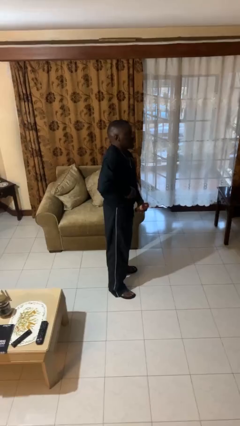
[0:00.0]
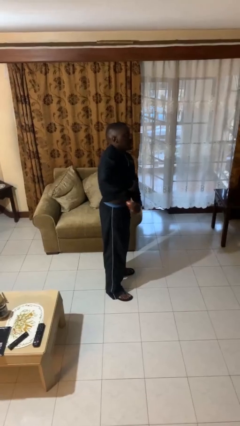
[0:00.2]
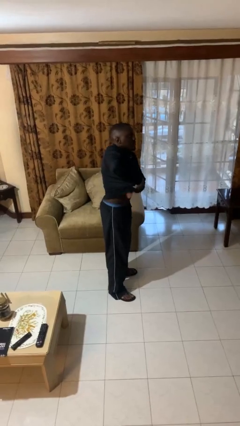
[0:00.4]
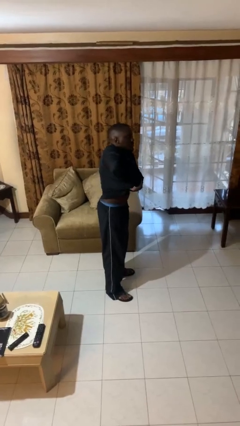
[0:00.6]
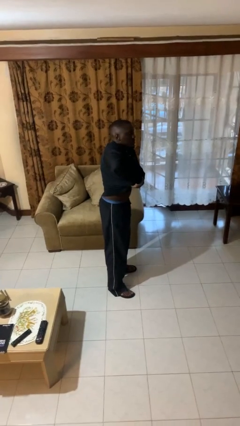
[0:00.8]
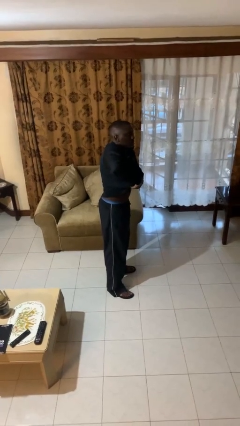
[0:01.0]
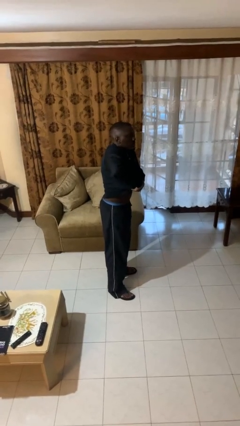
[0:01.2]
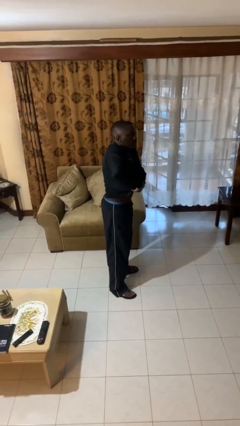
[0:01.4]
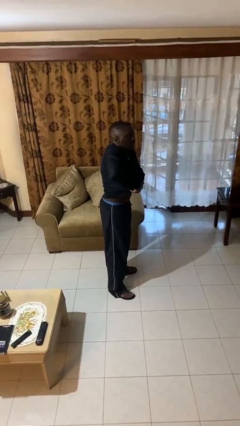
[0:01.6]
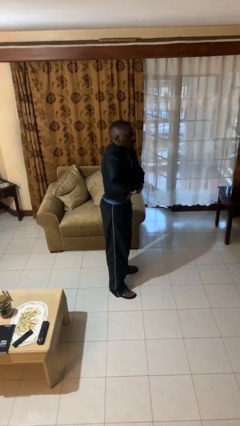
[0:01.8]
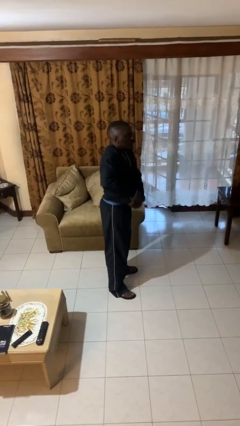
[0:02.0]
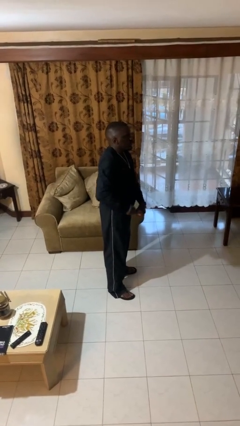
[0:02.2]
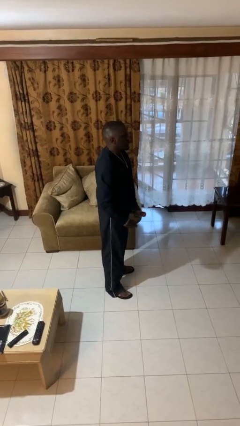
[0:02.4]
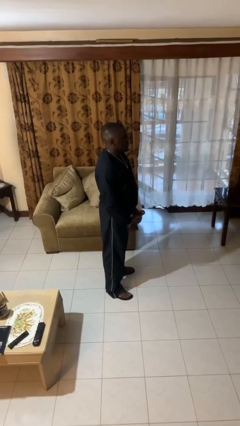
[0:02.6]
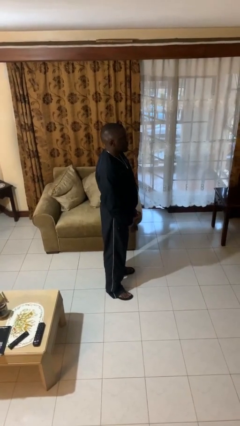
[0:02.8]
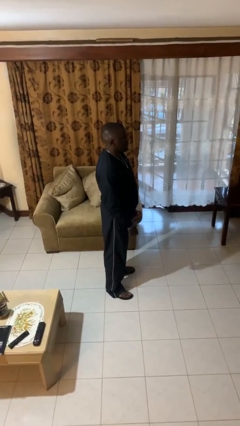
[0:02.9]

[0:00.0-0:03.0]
person applies deodorant

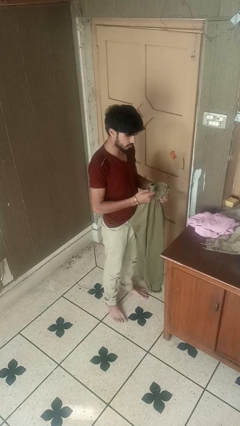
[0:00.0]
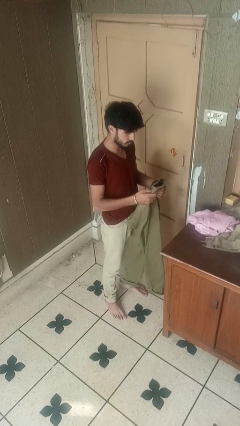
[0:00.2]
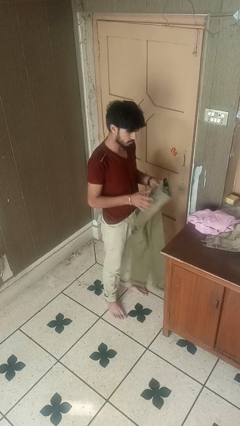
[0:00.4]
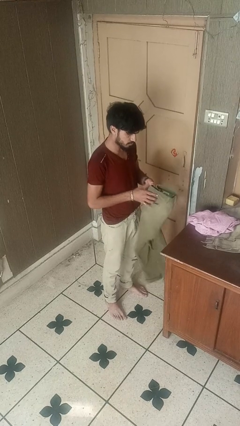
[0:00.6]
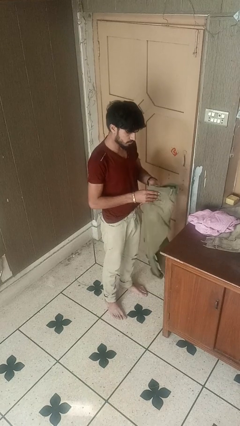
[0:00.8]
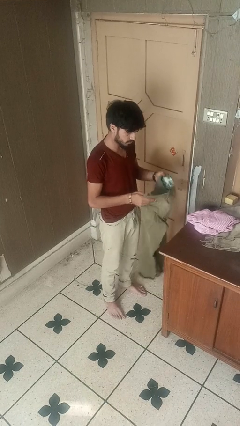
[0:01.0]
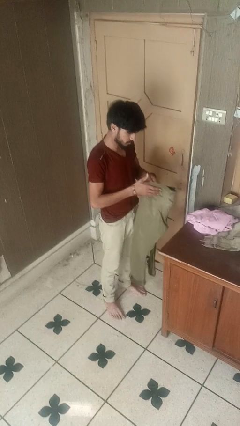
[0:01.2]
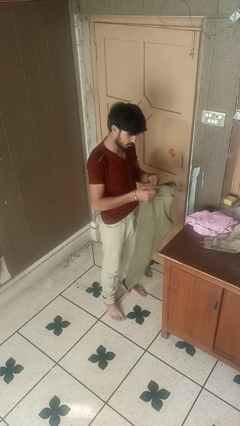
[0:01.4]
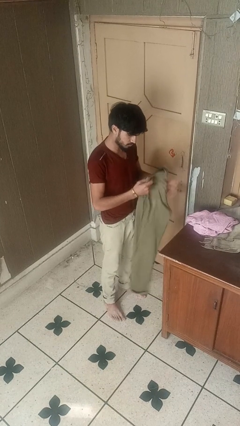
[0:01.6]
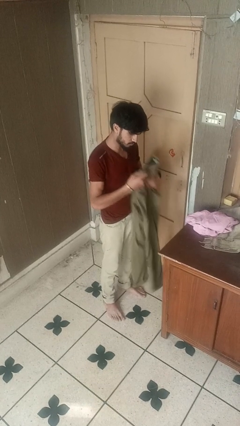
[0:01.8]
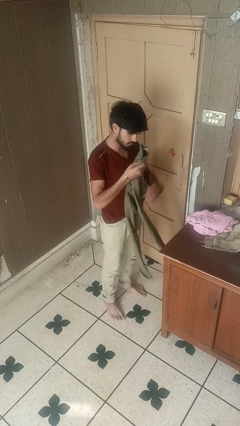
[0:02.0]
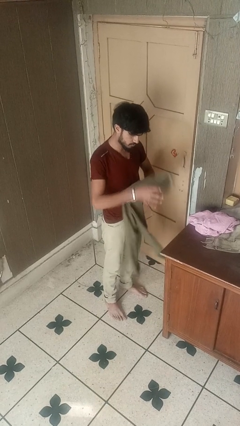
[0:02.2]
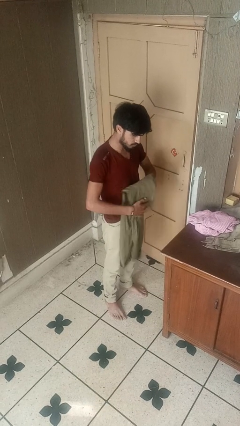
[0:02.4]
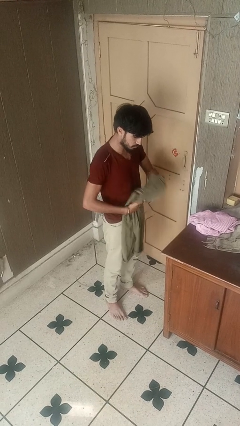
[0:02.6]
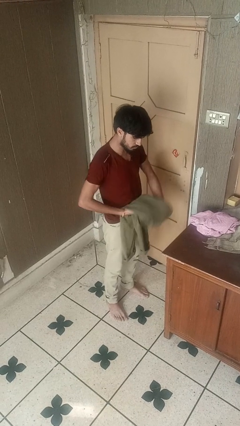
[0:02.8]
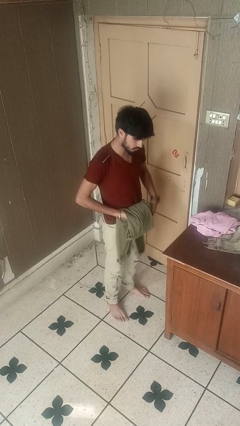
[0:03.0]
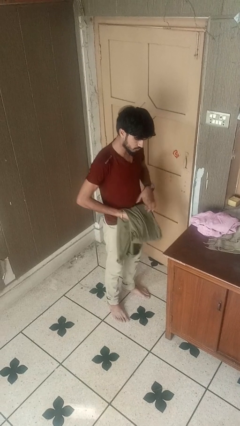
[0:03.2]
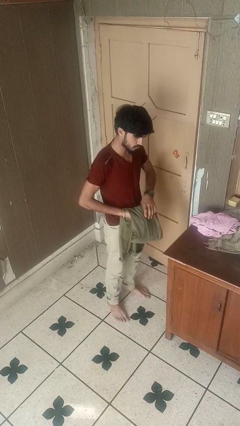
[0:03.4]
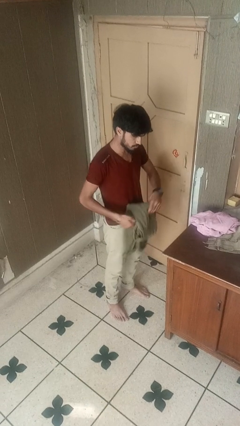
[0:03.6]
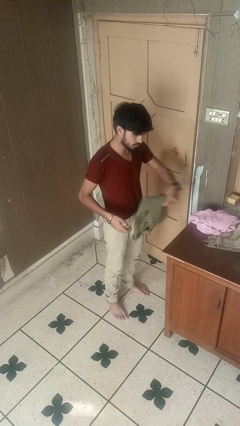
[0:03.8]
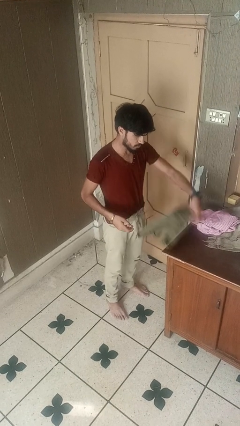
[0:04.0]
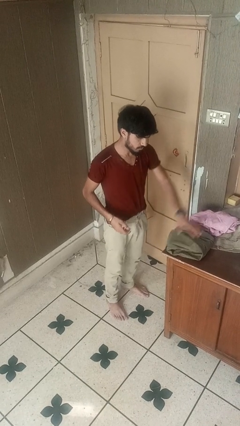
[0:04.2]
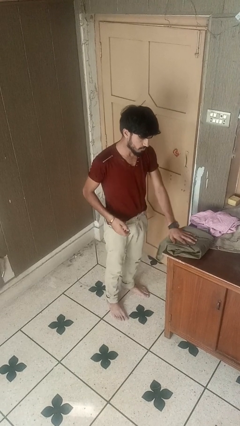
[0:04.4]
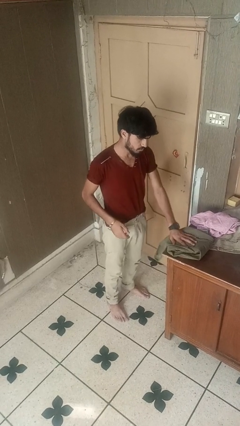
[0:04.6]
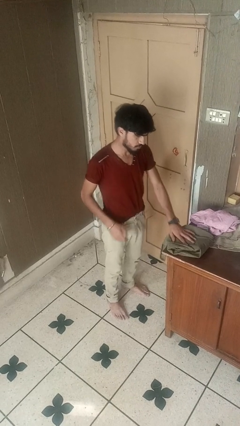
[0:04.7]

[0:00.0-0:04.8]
person folds pants

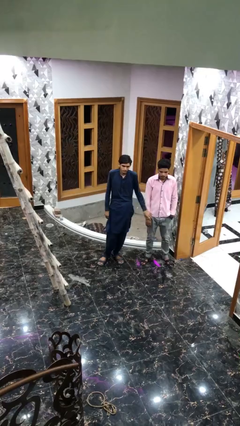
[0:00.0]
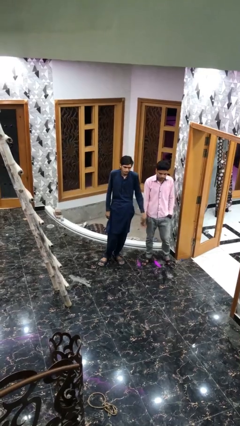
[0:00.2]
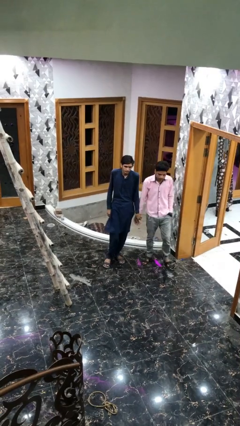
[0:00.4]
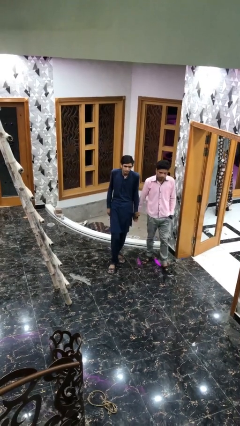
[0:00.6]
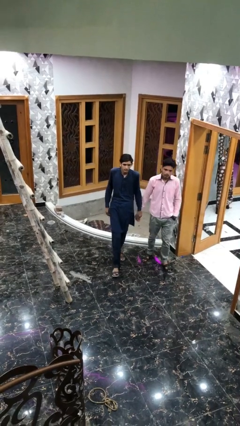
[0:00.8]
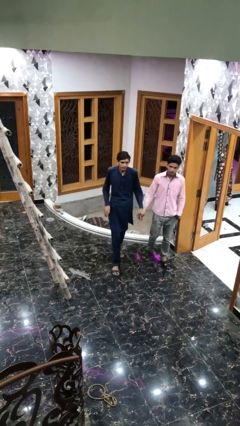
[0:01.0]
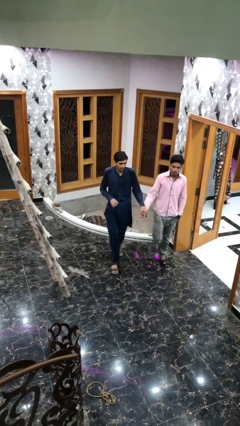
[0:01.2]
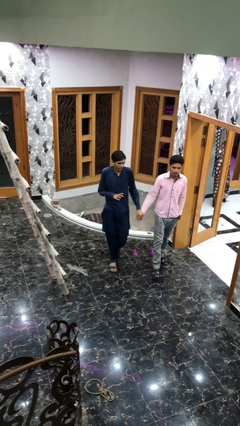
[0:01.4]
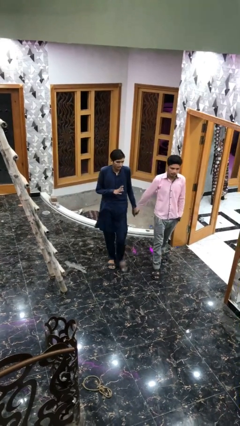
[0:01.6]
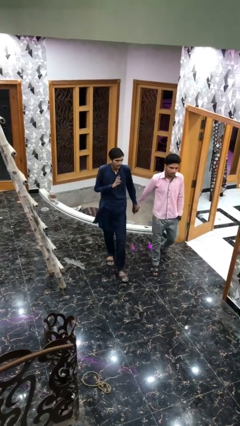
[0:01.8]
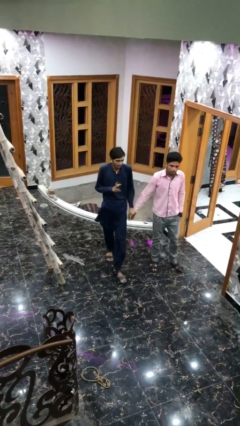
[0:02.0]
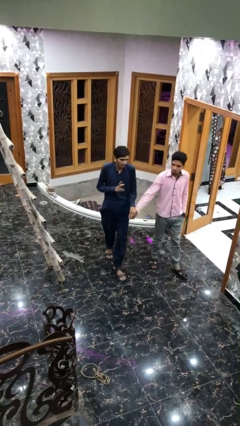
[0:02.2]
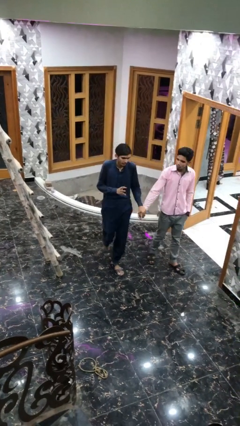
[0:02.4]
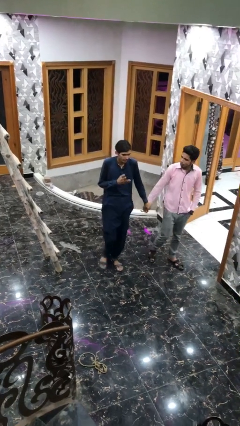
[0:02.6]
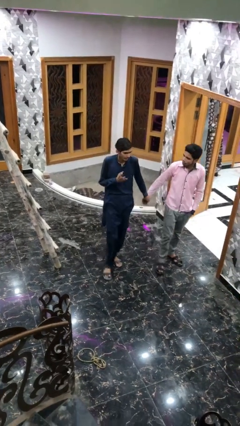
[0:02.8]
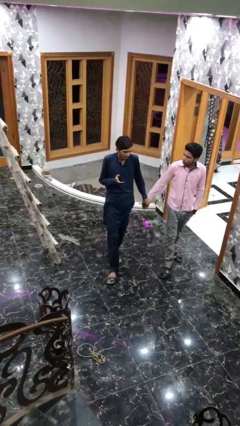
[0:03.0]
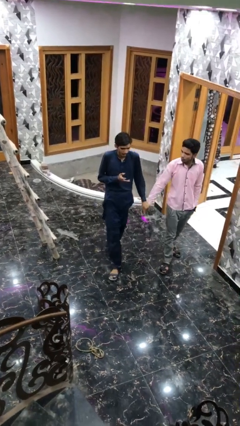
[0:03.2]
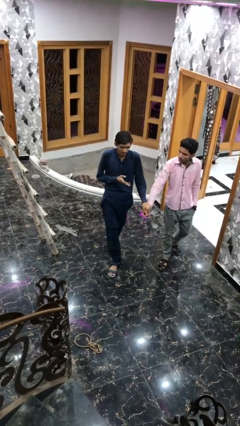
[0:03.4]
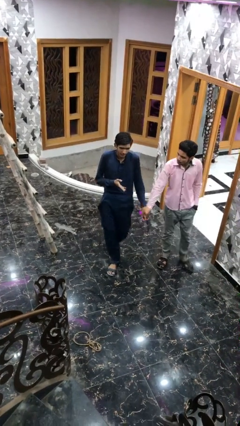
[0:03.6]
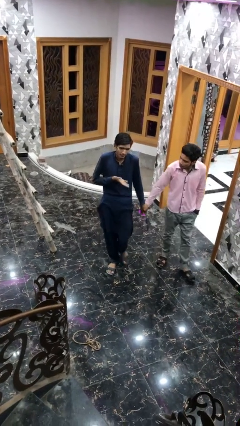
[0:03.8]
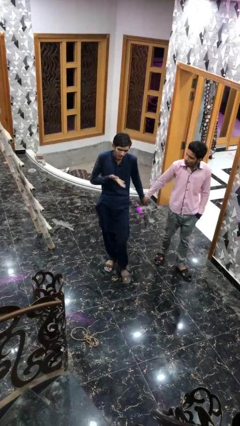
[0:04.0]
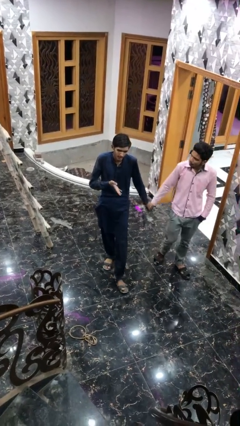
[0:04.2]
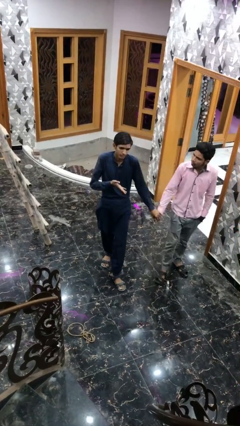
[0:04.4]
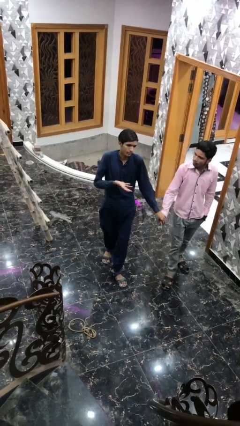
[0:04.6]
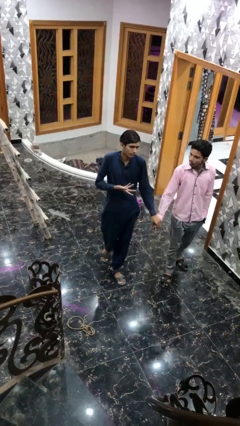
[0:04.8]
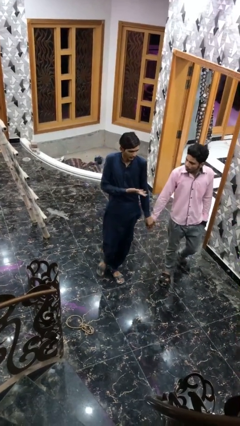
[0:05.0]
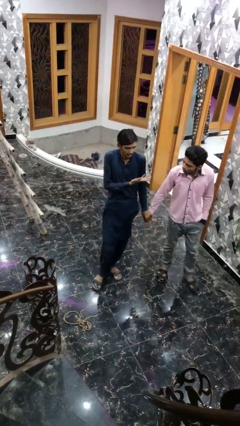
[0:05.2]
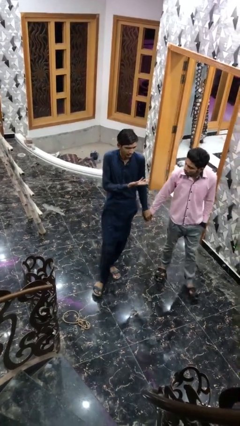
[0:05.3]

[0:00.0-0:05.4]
person holds hand

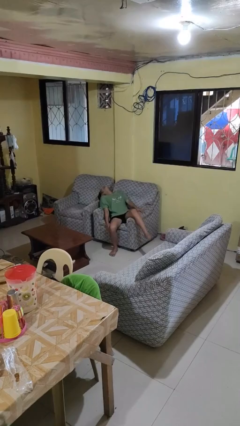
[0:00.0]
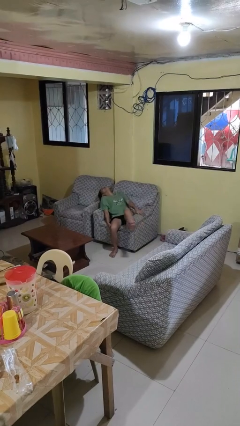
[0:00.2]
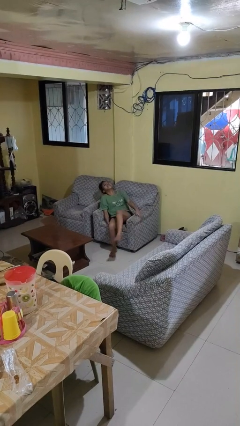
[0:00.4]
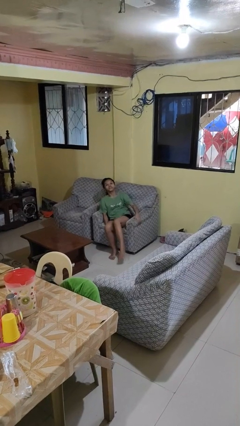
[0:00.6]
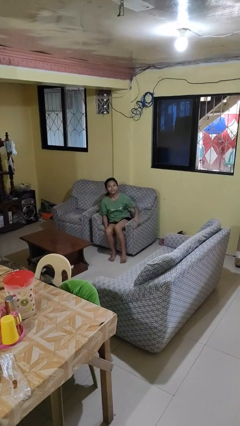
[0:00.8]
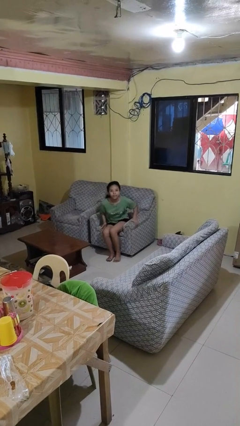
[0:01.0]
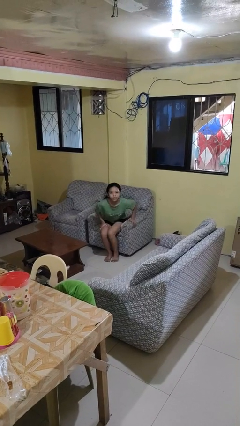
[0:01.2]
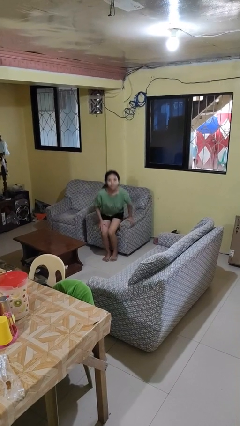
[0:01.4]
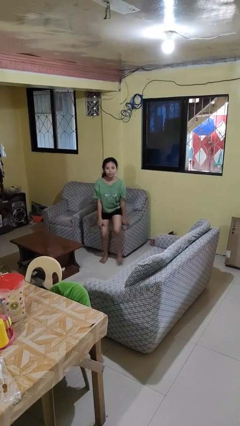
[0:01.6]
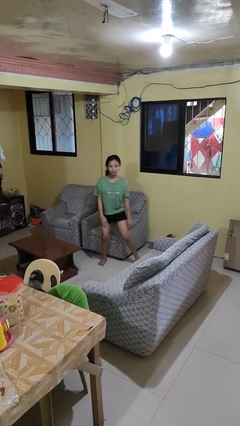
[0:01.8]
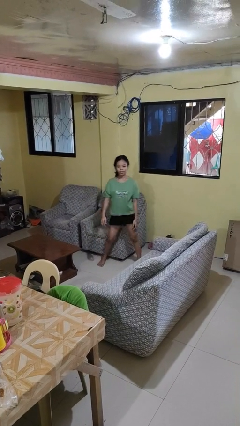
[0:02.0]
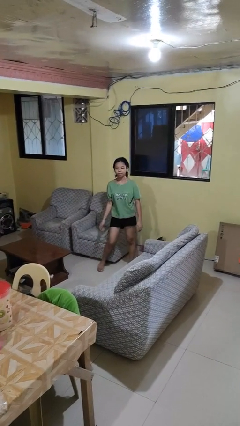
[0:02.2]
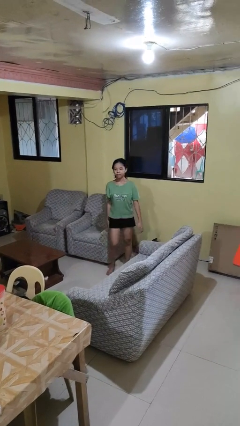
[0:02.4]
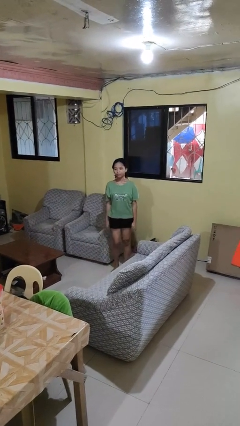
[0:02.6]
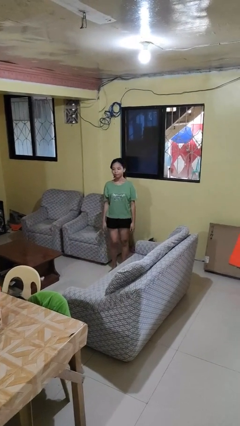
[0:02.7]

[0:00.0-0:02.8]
person stands up

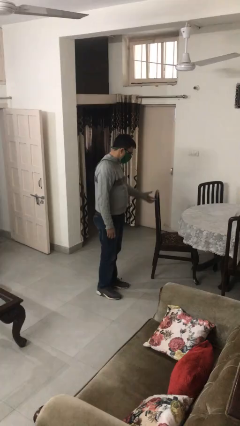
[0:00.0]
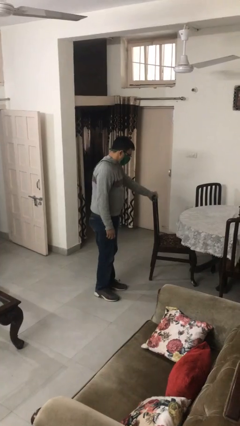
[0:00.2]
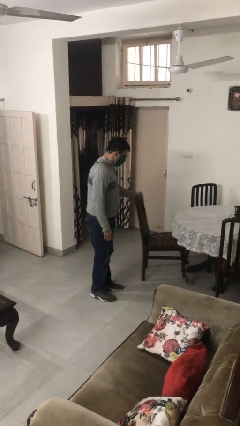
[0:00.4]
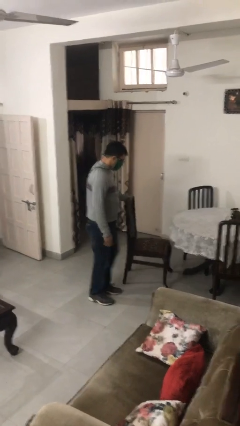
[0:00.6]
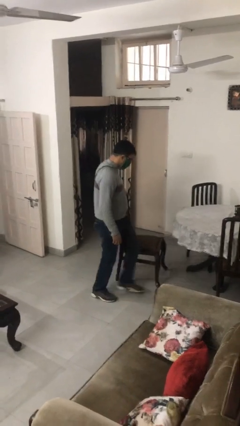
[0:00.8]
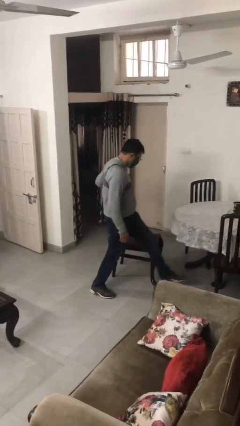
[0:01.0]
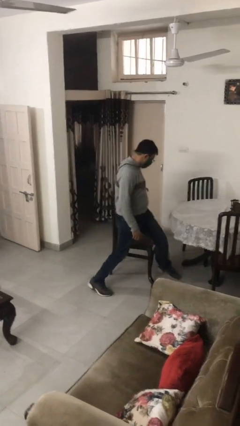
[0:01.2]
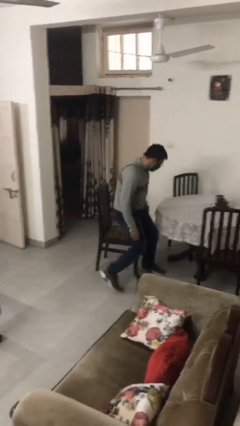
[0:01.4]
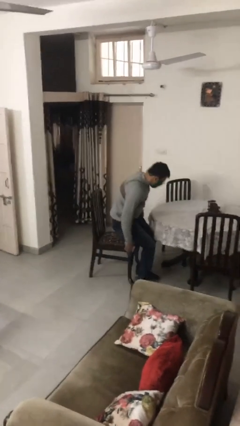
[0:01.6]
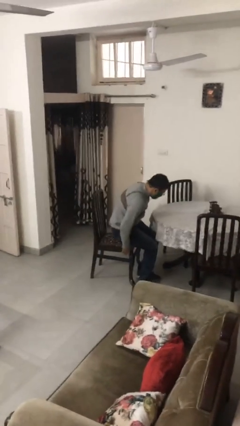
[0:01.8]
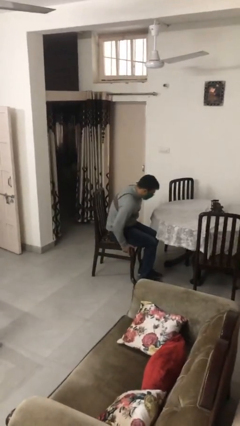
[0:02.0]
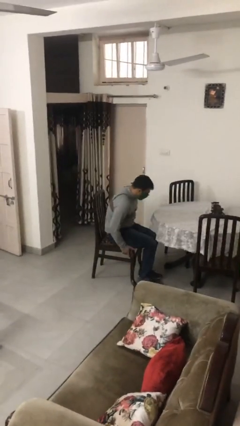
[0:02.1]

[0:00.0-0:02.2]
person sits down
